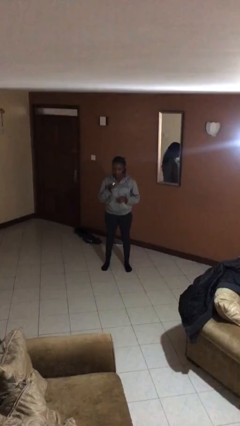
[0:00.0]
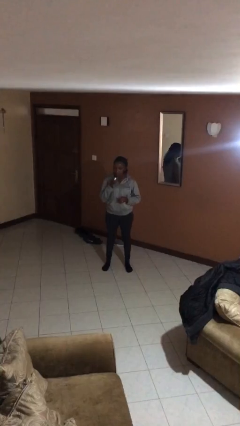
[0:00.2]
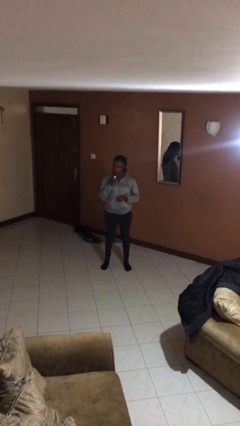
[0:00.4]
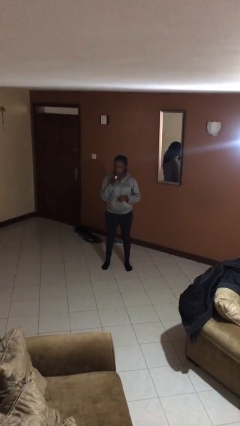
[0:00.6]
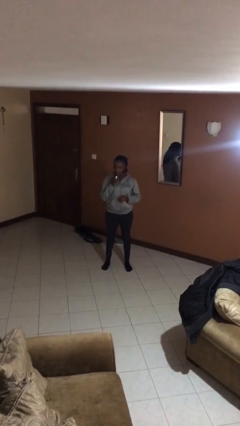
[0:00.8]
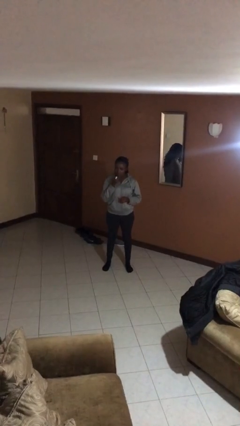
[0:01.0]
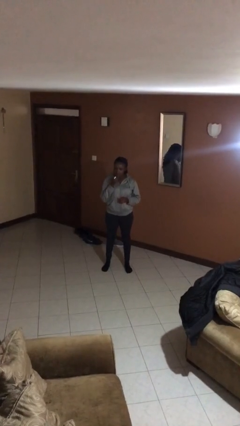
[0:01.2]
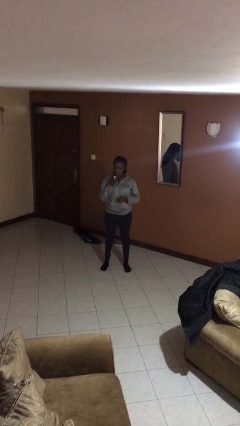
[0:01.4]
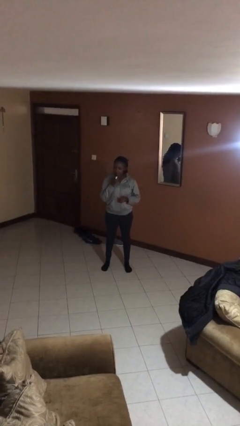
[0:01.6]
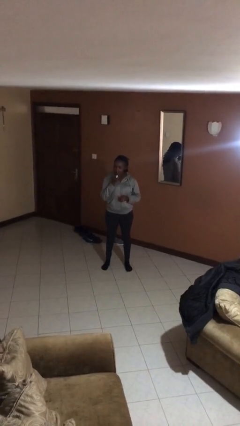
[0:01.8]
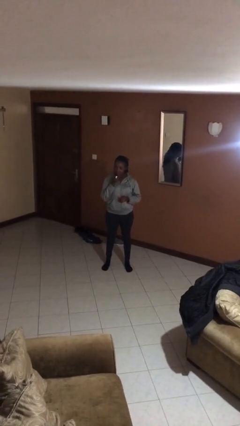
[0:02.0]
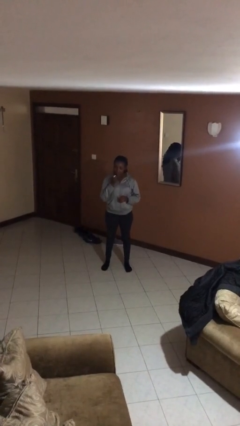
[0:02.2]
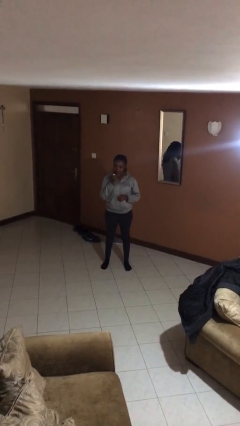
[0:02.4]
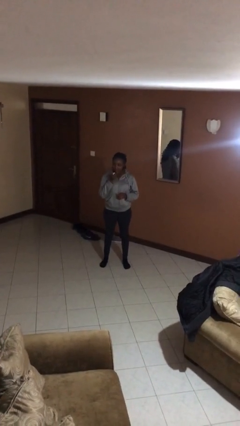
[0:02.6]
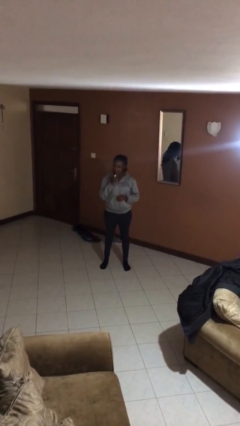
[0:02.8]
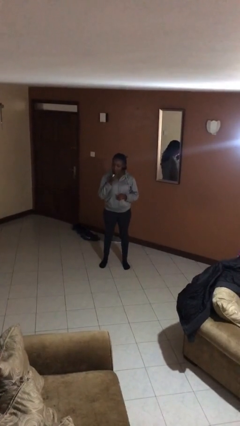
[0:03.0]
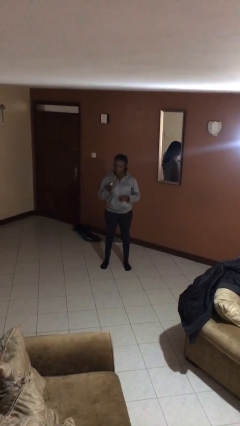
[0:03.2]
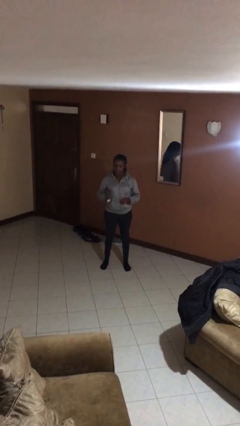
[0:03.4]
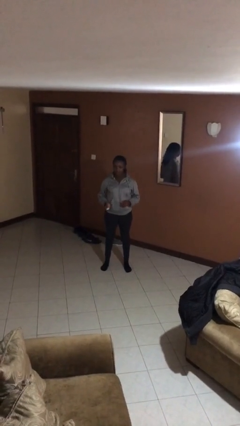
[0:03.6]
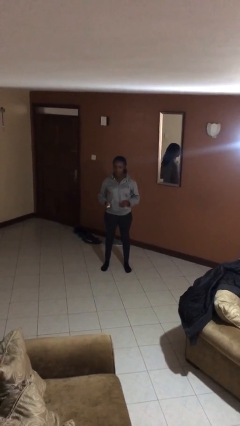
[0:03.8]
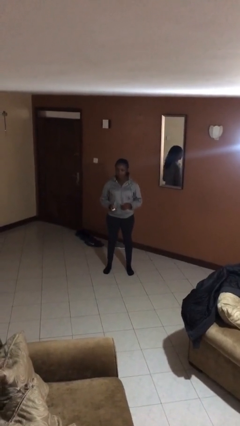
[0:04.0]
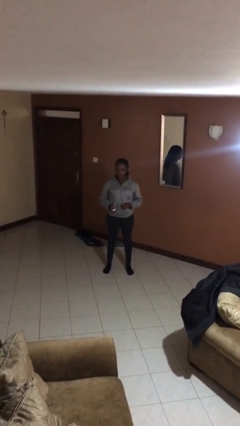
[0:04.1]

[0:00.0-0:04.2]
person applies lip makeup

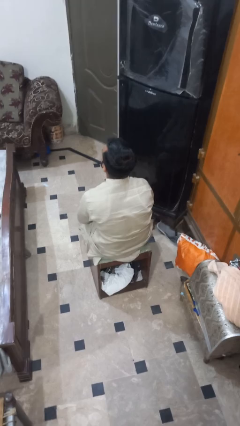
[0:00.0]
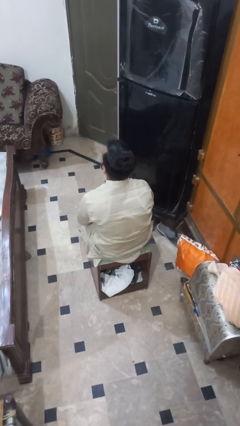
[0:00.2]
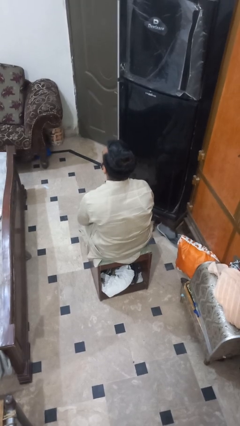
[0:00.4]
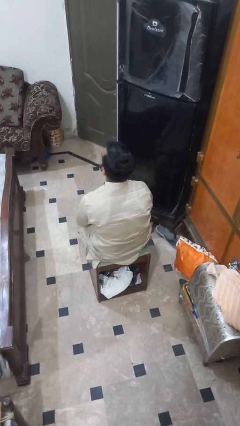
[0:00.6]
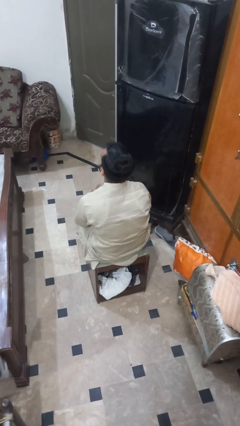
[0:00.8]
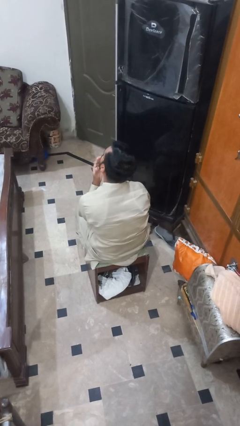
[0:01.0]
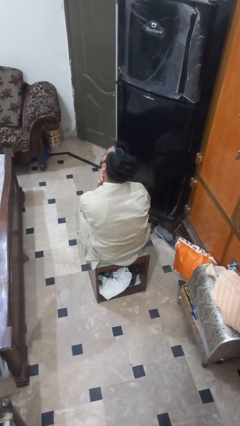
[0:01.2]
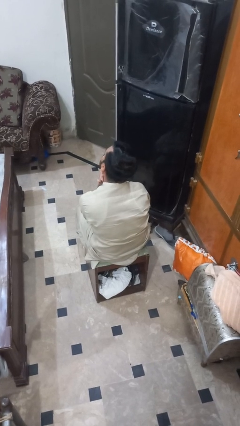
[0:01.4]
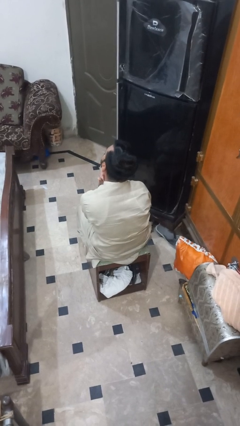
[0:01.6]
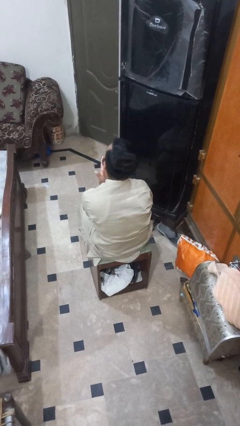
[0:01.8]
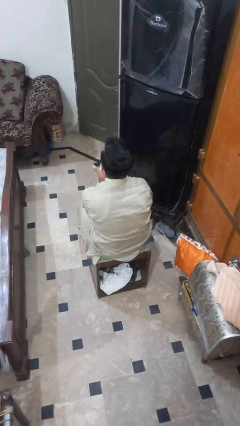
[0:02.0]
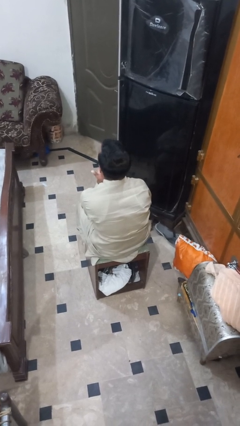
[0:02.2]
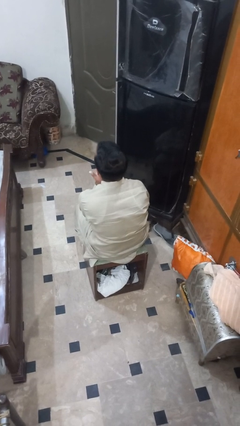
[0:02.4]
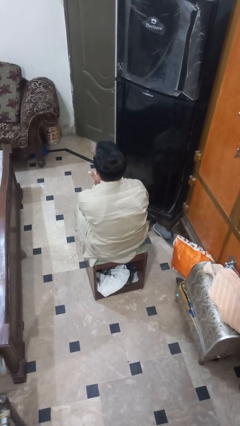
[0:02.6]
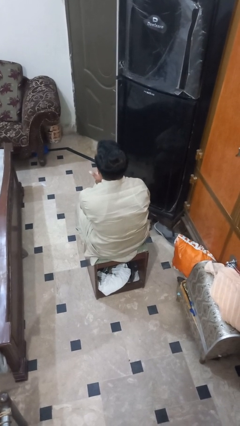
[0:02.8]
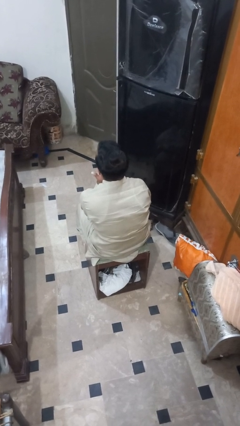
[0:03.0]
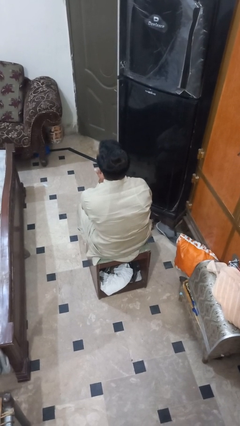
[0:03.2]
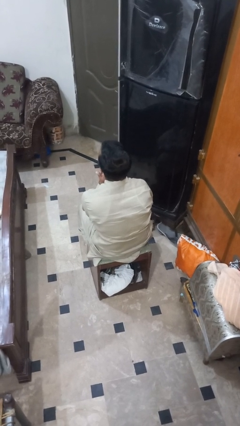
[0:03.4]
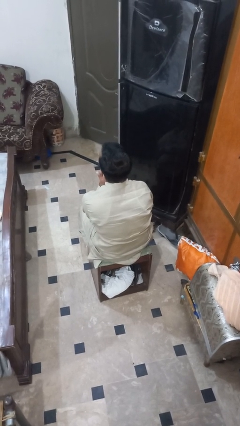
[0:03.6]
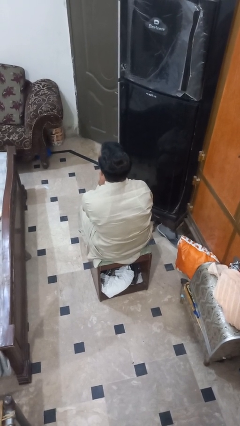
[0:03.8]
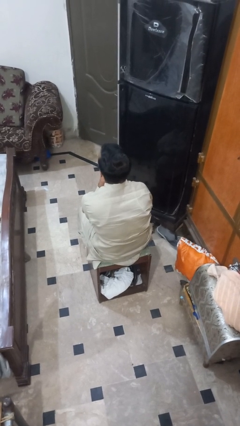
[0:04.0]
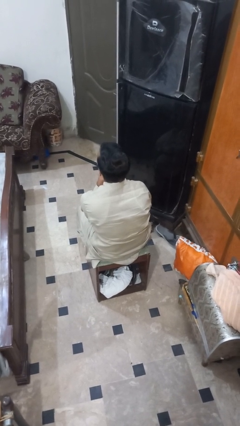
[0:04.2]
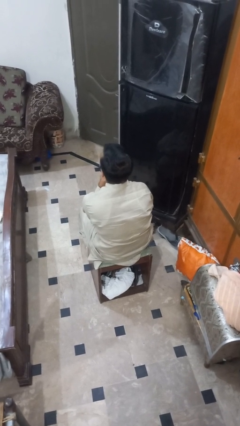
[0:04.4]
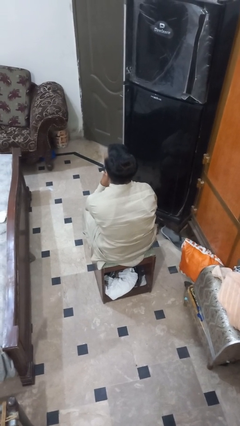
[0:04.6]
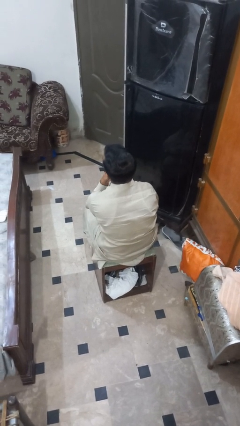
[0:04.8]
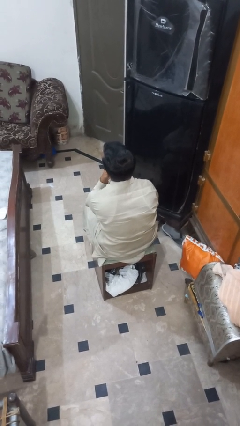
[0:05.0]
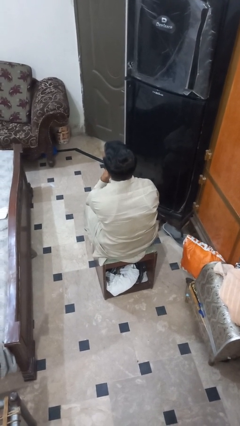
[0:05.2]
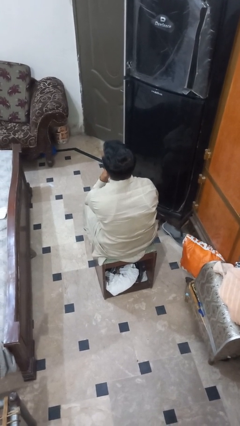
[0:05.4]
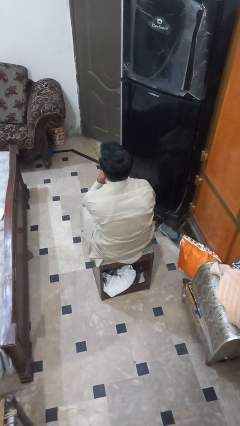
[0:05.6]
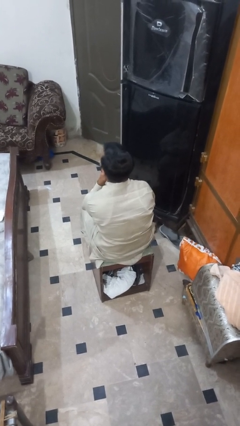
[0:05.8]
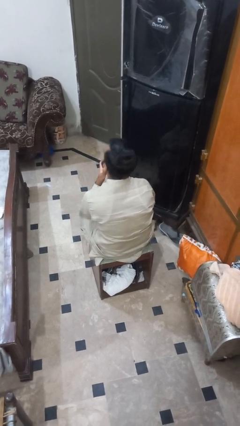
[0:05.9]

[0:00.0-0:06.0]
person strokes chin

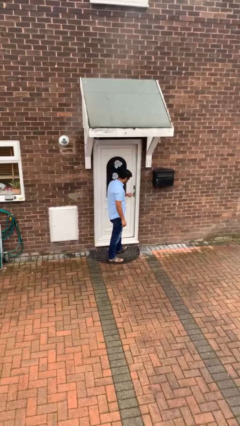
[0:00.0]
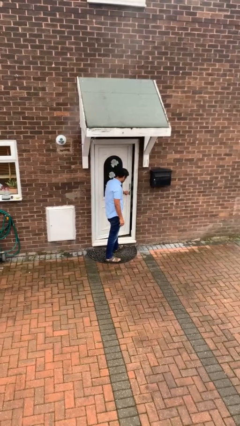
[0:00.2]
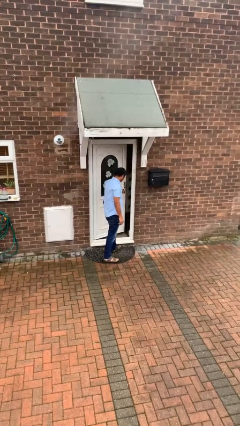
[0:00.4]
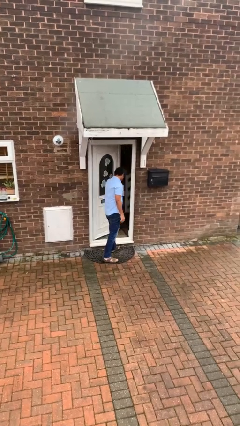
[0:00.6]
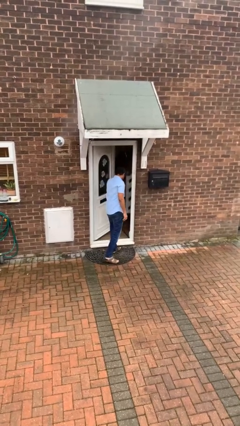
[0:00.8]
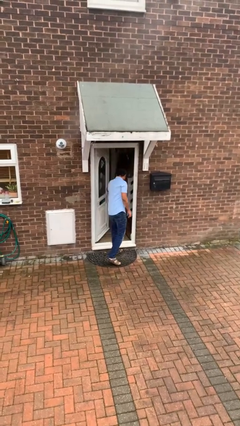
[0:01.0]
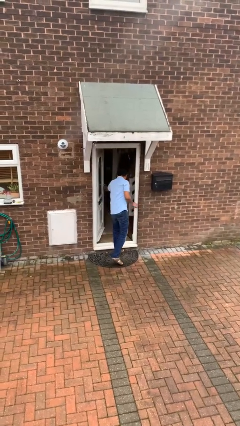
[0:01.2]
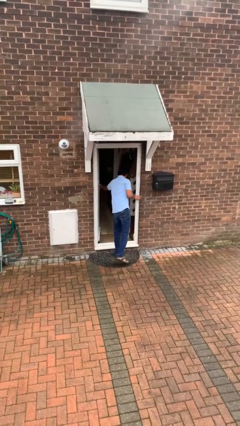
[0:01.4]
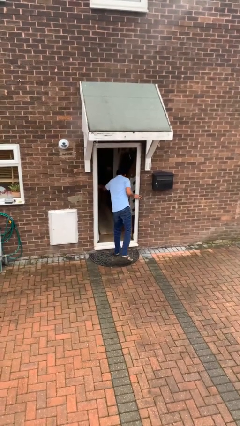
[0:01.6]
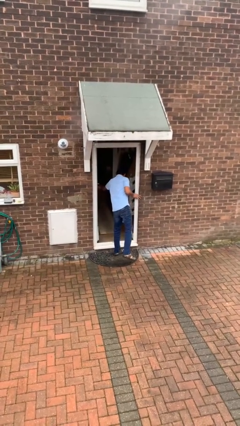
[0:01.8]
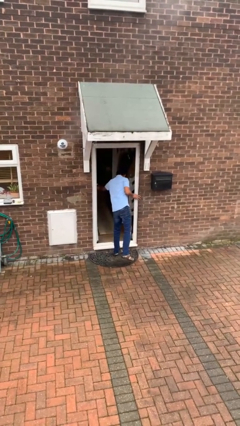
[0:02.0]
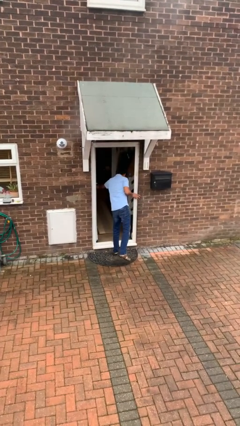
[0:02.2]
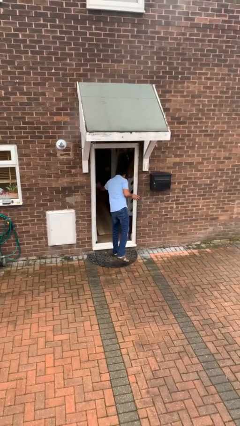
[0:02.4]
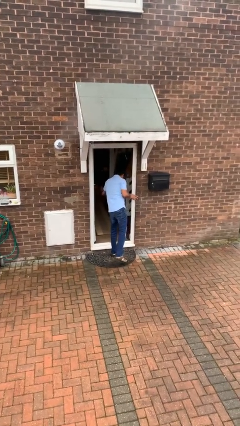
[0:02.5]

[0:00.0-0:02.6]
person opens facility door

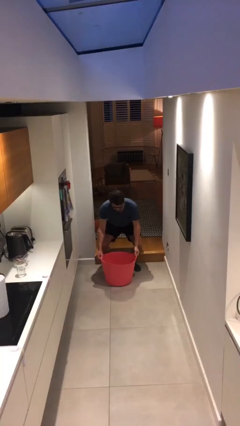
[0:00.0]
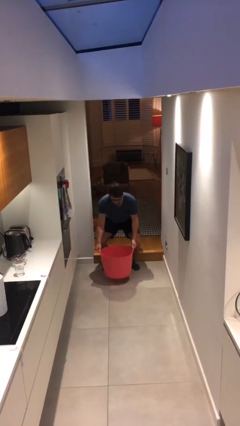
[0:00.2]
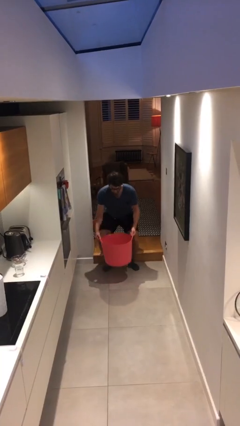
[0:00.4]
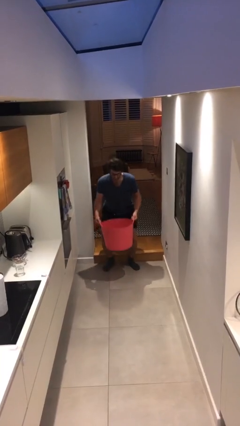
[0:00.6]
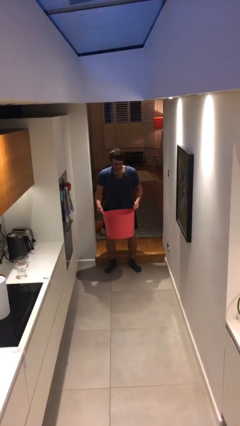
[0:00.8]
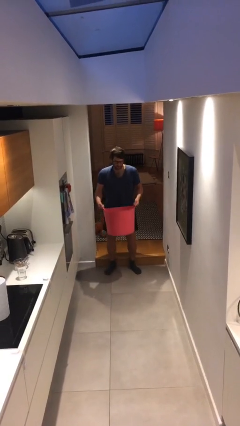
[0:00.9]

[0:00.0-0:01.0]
person picks up object from floor

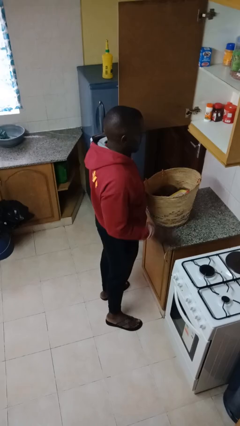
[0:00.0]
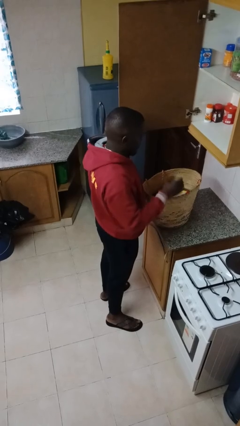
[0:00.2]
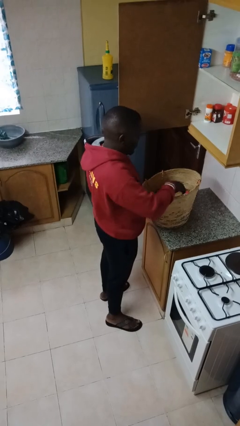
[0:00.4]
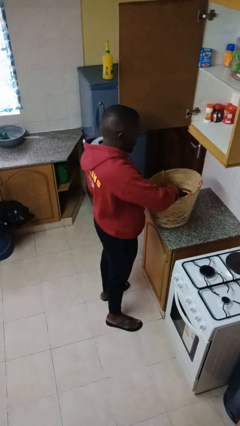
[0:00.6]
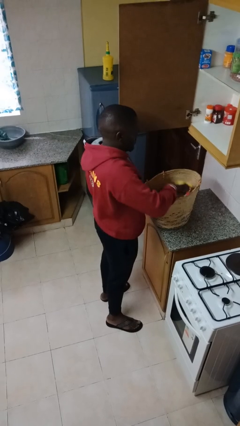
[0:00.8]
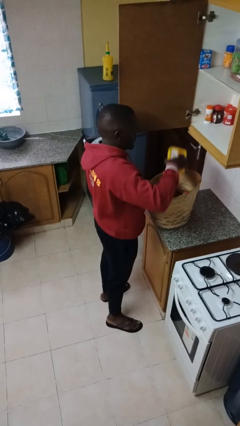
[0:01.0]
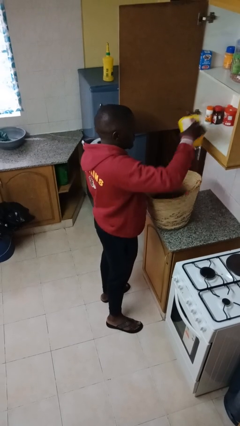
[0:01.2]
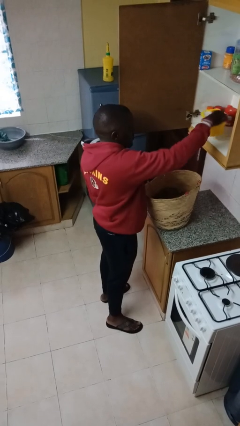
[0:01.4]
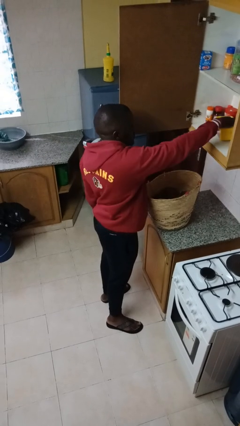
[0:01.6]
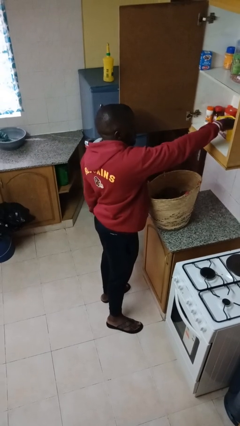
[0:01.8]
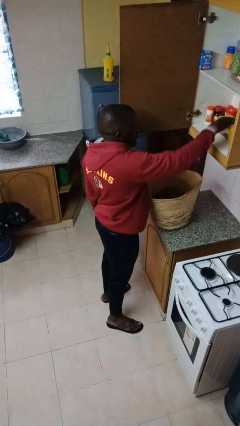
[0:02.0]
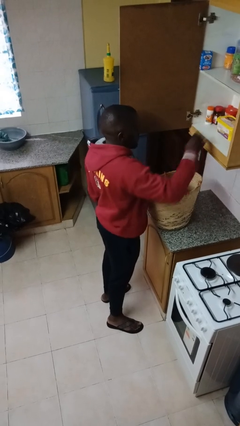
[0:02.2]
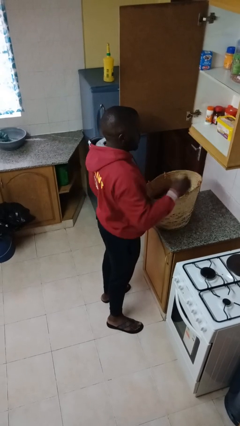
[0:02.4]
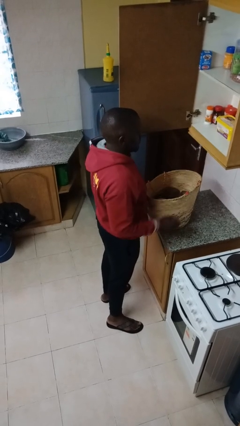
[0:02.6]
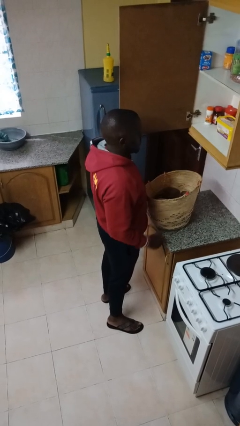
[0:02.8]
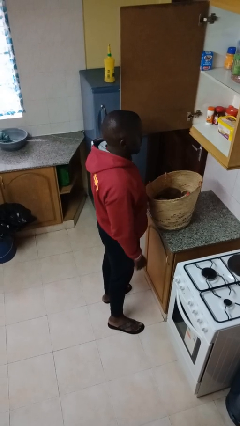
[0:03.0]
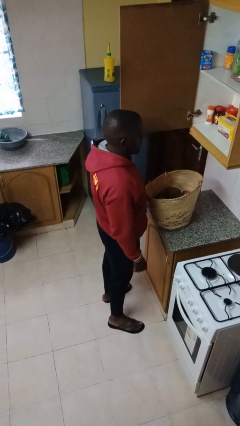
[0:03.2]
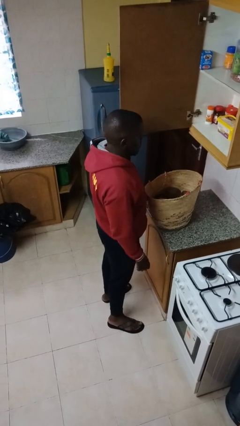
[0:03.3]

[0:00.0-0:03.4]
person loads groceries into cabinet

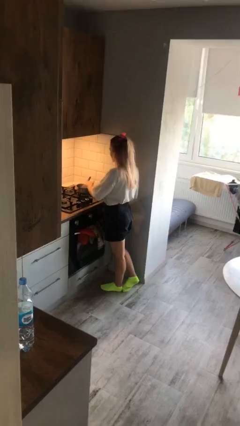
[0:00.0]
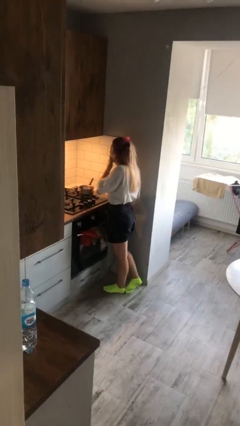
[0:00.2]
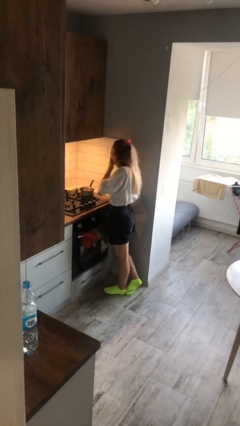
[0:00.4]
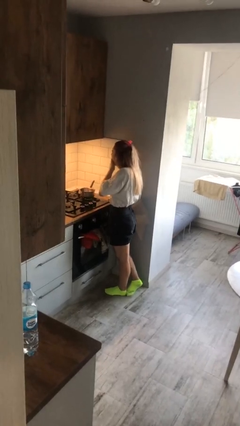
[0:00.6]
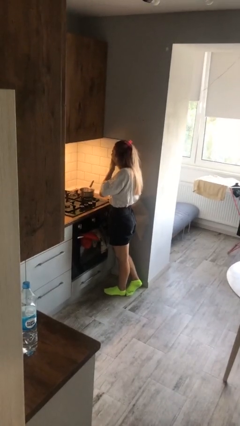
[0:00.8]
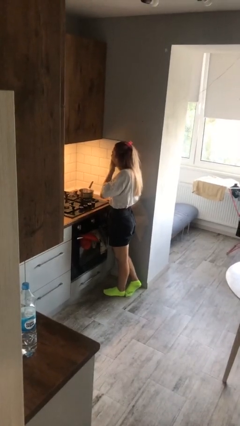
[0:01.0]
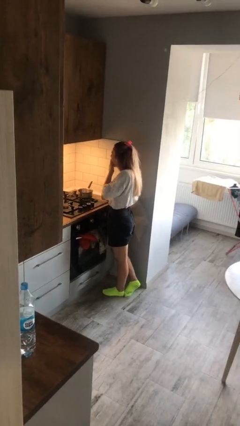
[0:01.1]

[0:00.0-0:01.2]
person burns hand
